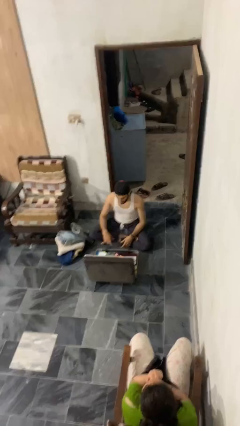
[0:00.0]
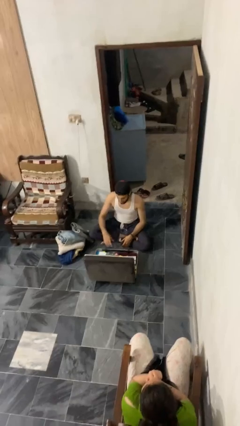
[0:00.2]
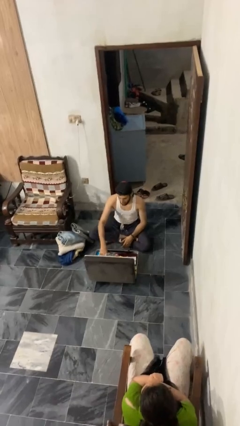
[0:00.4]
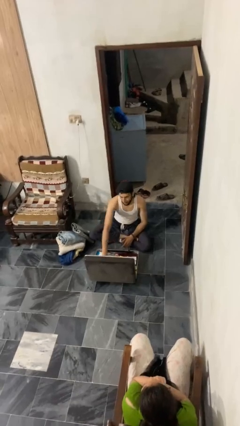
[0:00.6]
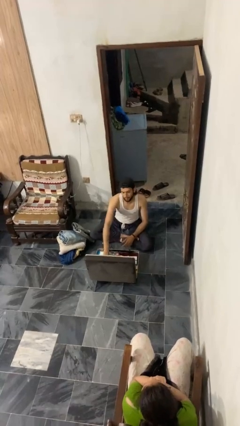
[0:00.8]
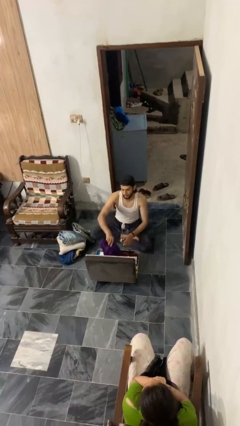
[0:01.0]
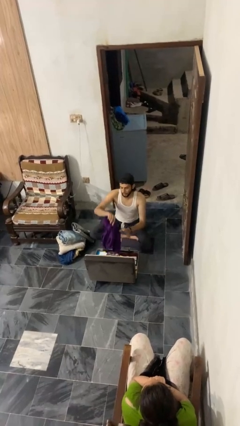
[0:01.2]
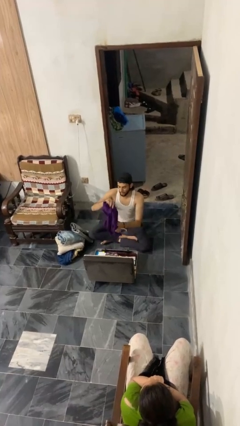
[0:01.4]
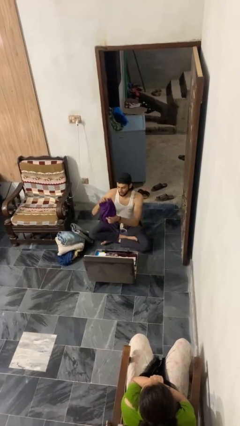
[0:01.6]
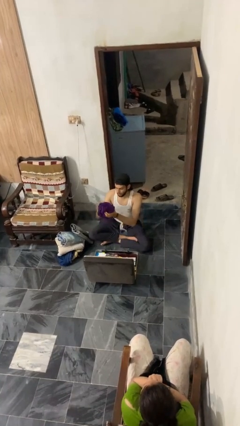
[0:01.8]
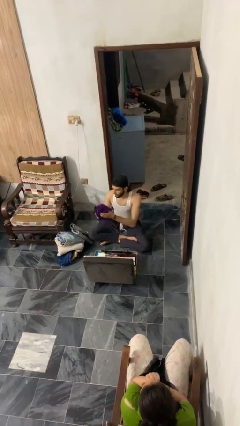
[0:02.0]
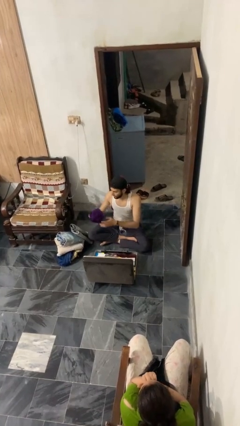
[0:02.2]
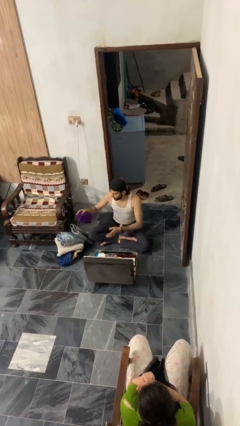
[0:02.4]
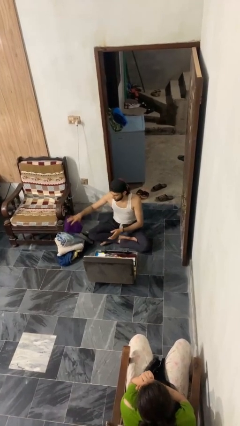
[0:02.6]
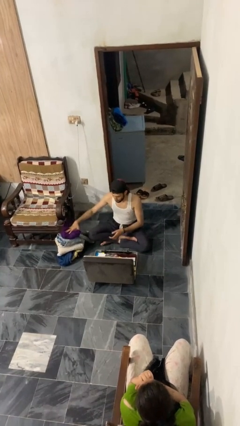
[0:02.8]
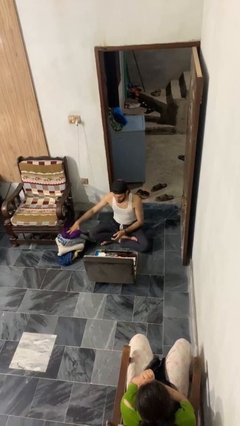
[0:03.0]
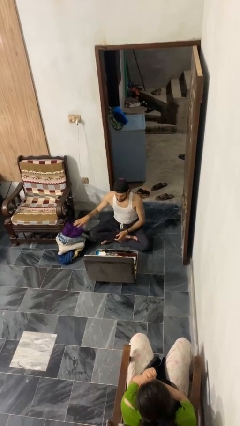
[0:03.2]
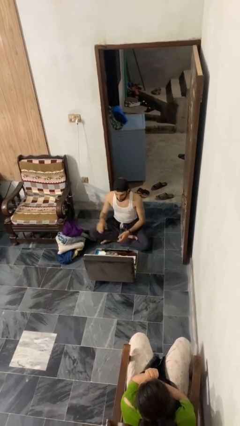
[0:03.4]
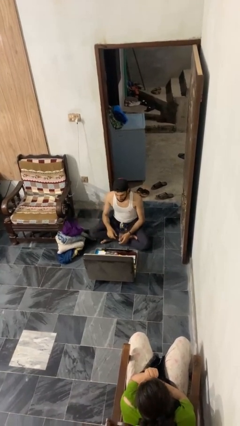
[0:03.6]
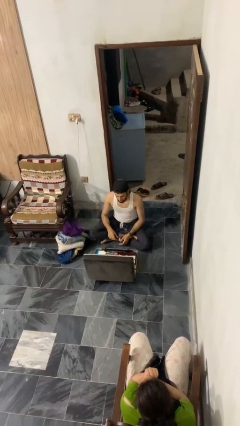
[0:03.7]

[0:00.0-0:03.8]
person unloads clothes from suitcase

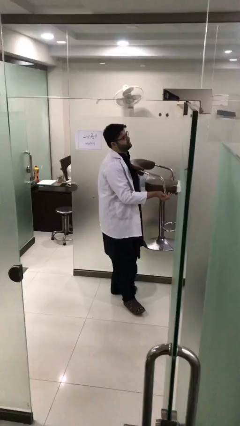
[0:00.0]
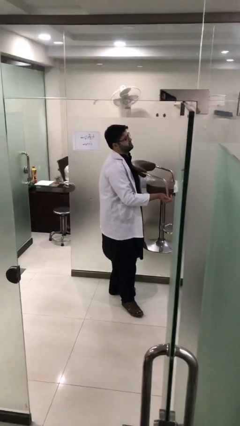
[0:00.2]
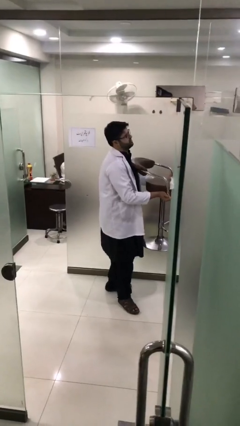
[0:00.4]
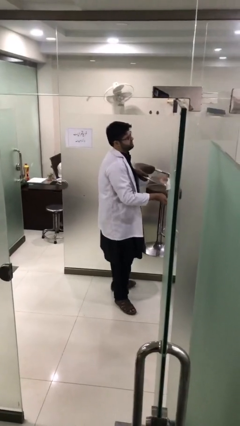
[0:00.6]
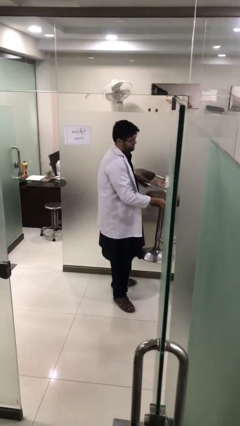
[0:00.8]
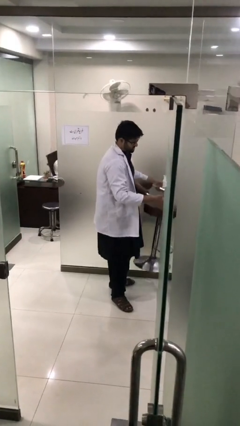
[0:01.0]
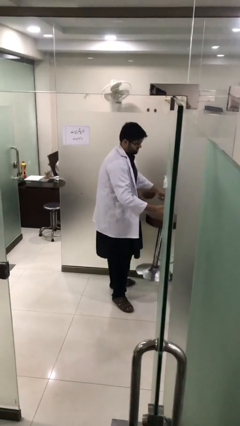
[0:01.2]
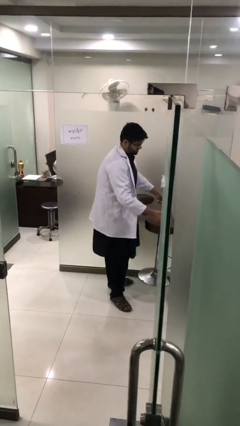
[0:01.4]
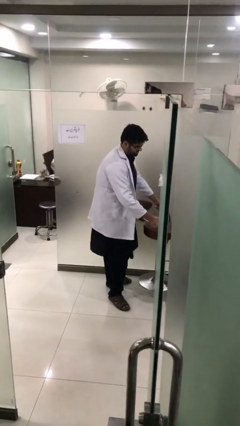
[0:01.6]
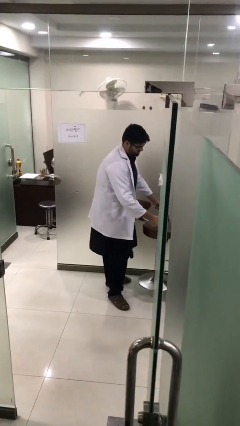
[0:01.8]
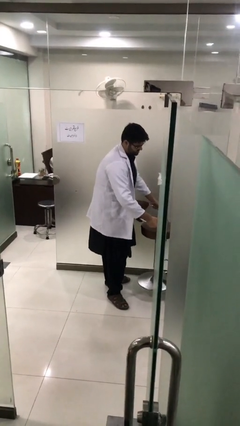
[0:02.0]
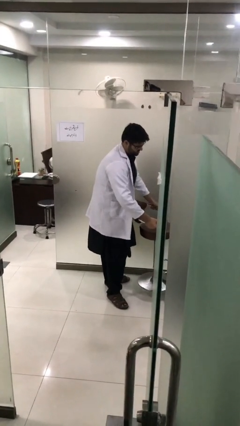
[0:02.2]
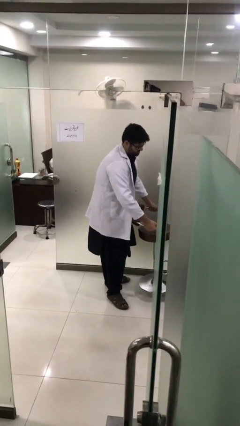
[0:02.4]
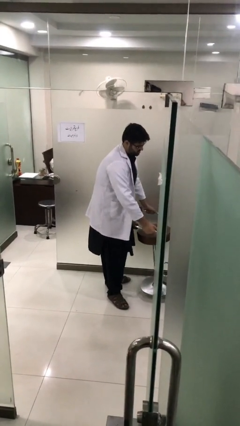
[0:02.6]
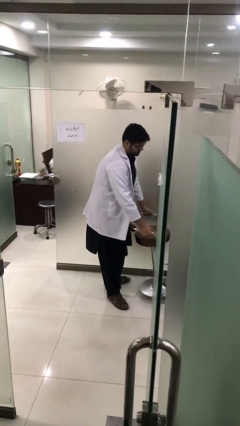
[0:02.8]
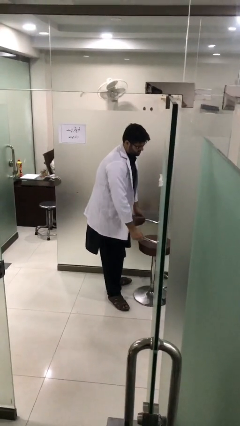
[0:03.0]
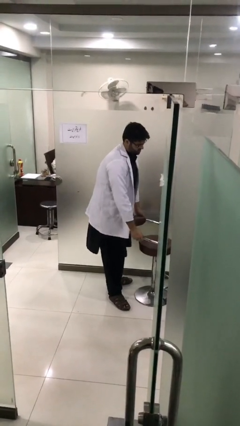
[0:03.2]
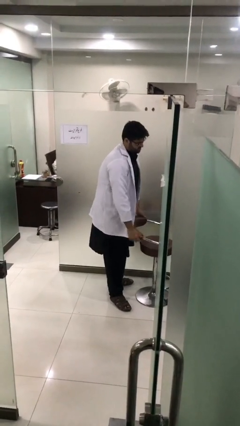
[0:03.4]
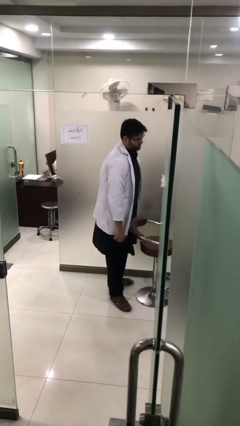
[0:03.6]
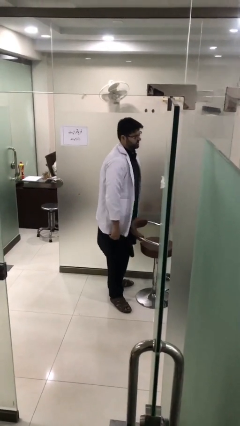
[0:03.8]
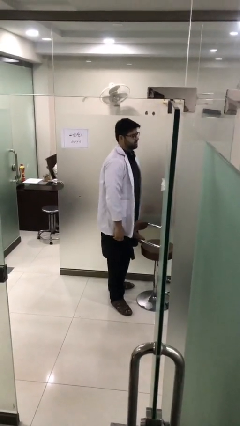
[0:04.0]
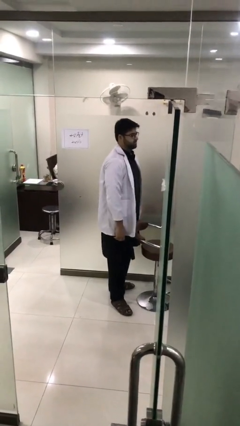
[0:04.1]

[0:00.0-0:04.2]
person puts down object on floor

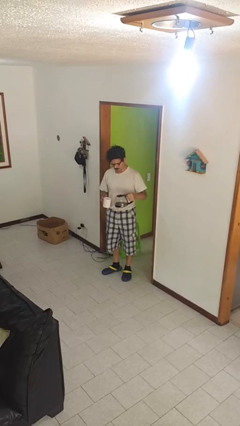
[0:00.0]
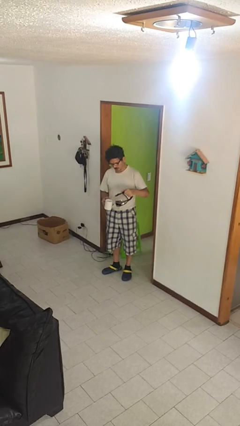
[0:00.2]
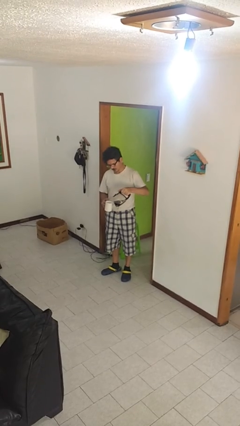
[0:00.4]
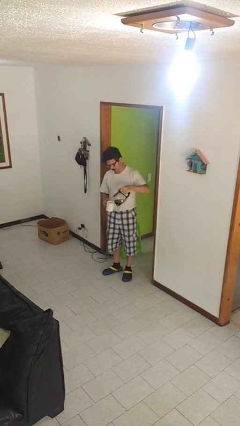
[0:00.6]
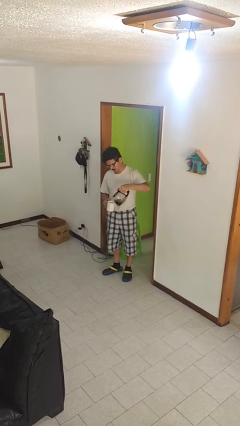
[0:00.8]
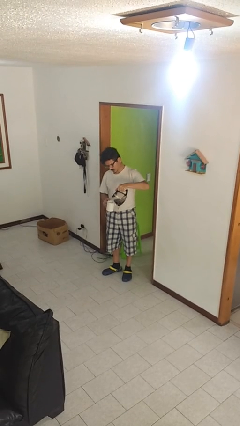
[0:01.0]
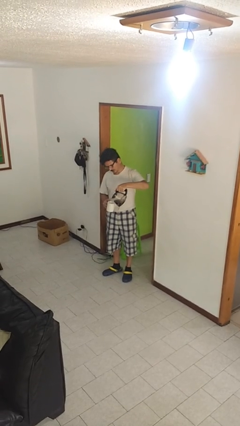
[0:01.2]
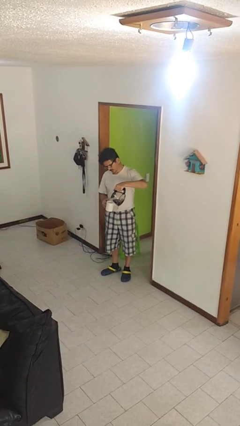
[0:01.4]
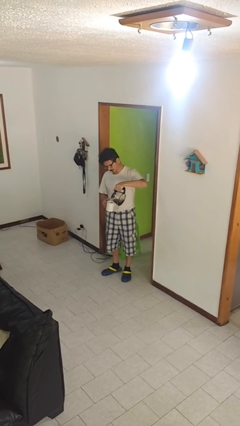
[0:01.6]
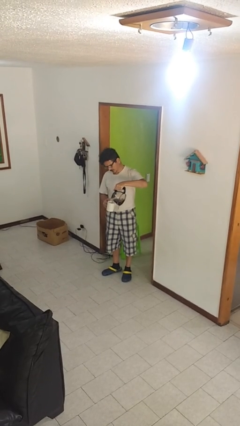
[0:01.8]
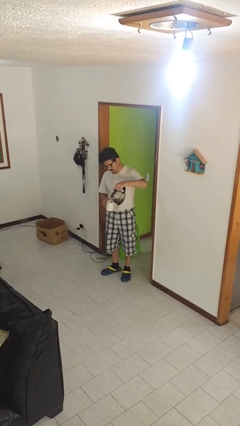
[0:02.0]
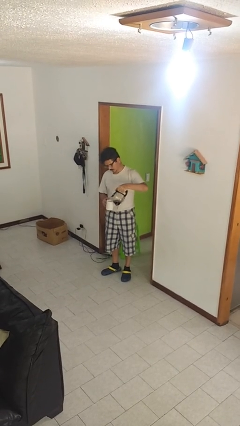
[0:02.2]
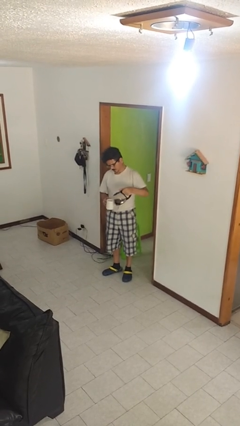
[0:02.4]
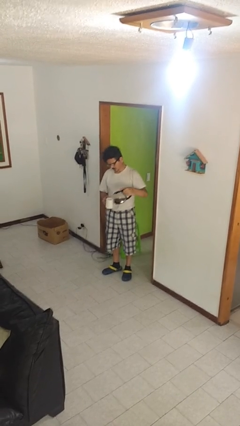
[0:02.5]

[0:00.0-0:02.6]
person pours coffee into mug

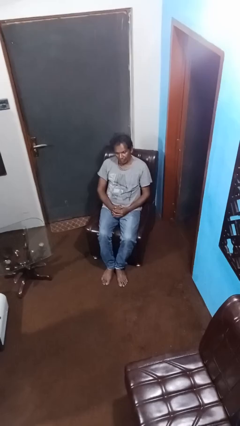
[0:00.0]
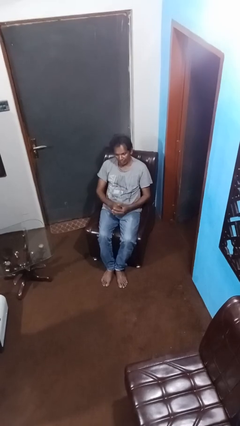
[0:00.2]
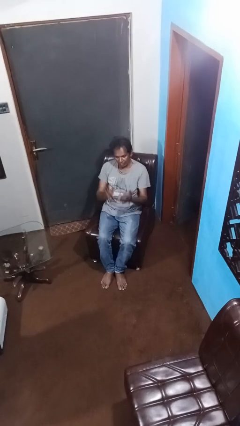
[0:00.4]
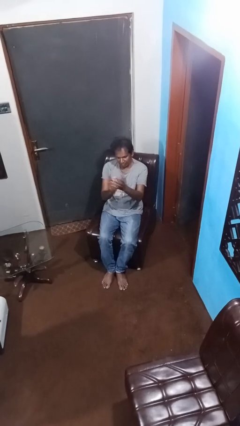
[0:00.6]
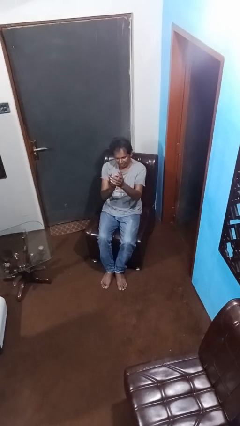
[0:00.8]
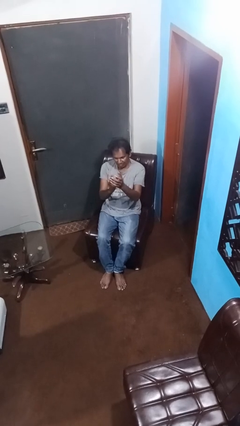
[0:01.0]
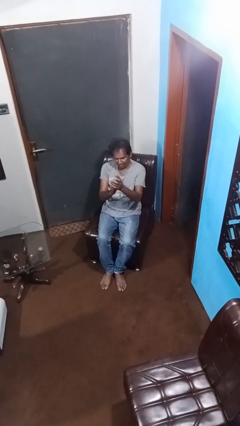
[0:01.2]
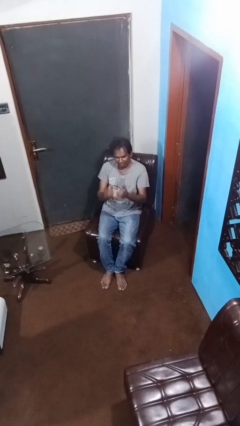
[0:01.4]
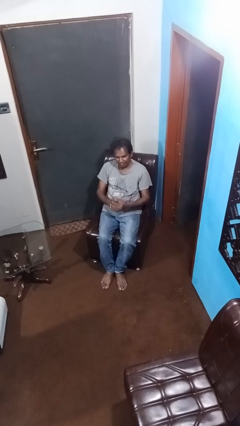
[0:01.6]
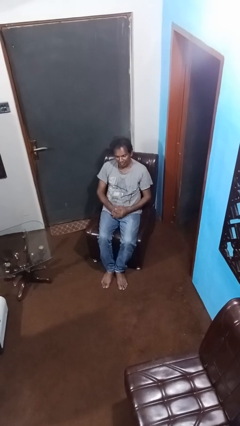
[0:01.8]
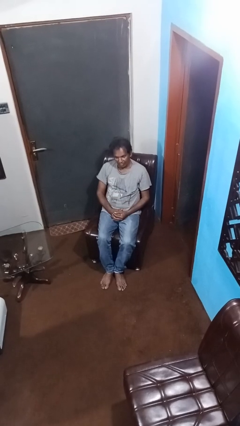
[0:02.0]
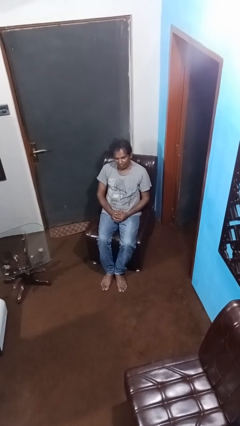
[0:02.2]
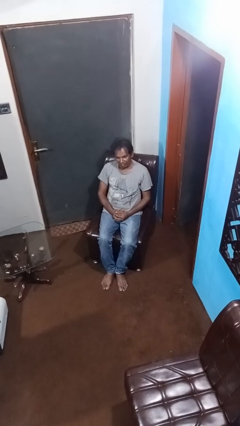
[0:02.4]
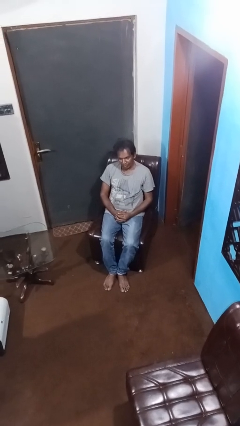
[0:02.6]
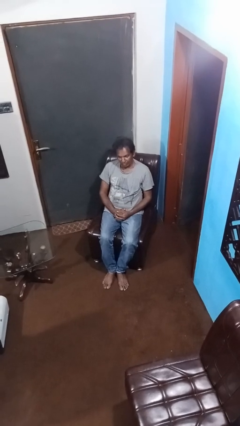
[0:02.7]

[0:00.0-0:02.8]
person claps hands

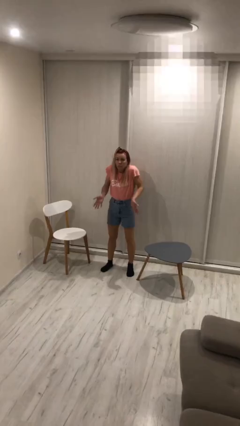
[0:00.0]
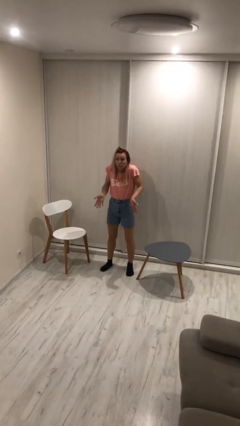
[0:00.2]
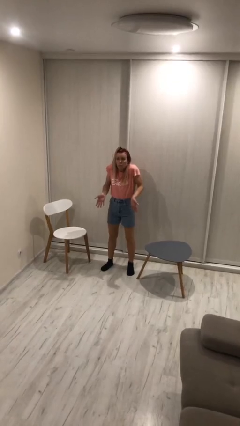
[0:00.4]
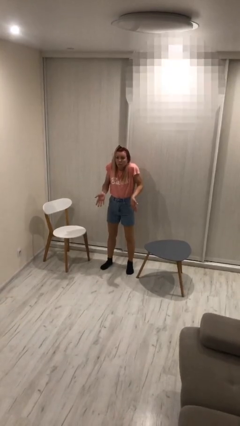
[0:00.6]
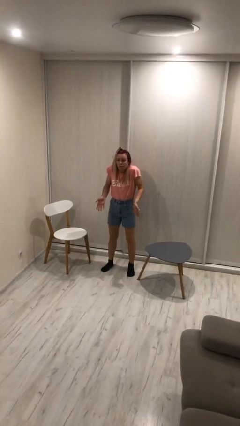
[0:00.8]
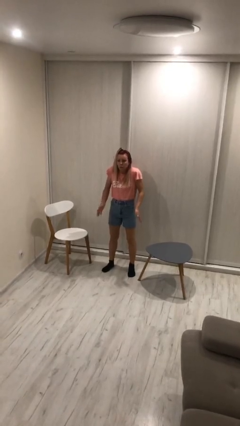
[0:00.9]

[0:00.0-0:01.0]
person shrugs

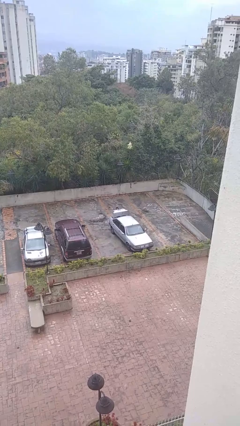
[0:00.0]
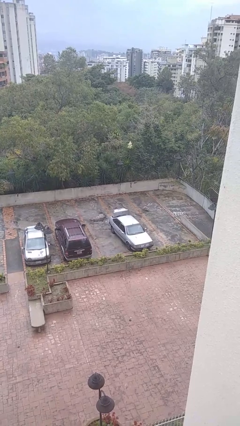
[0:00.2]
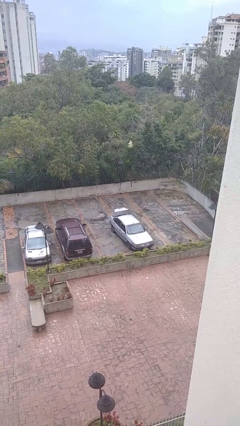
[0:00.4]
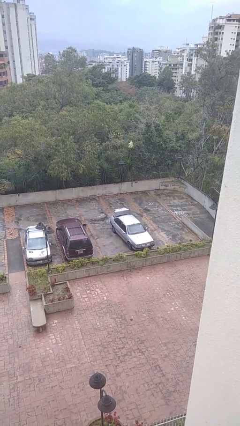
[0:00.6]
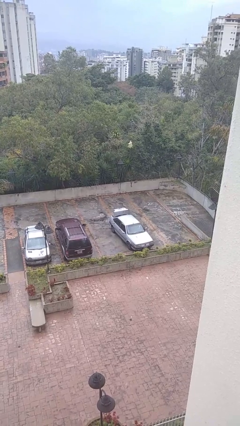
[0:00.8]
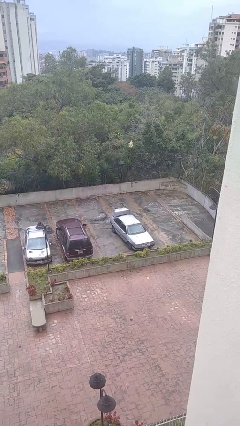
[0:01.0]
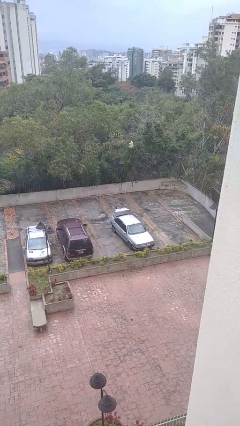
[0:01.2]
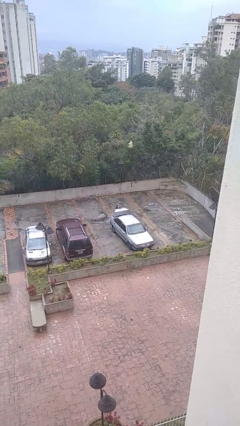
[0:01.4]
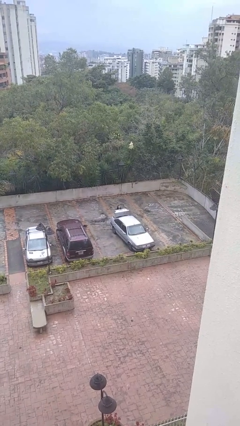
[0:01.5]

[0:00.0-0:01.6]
person unloads car

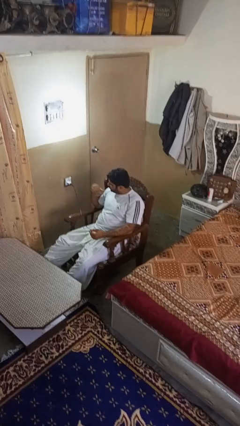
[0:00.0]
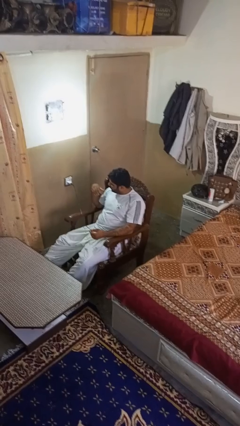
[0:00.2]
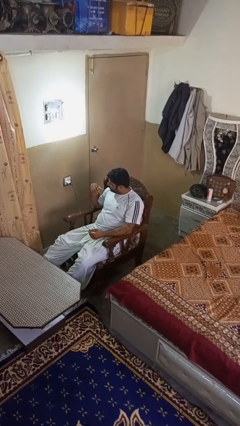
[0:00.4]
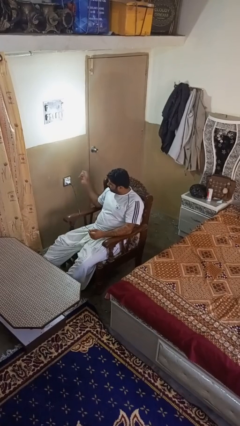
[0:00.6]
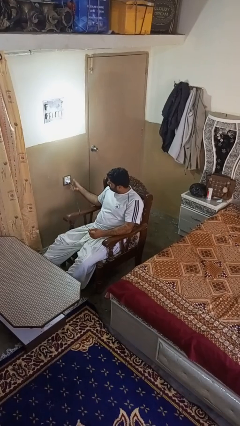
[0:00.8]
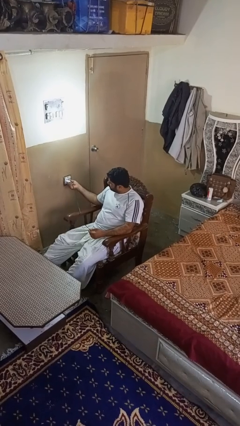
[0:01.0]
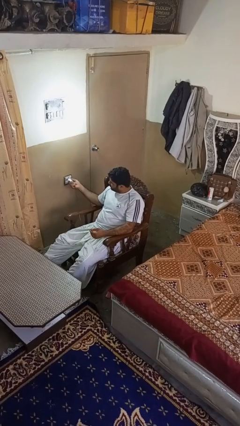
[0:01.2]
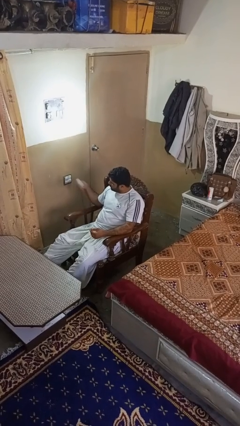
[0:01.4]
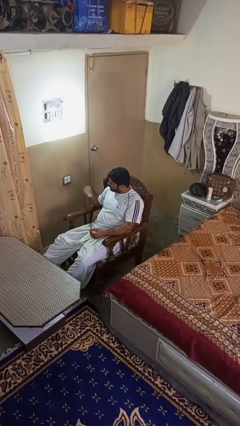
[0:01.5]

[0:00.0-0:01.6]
person unplugs from electrical socket
